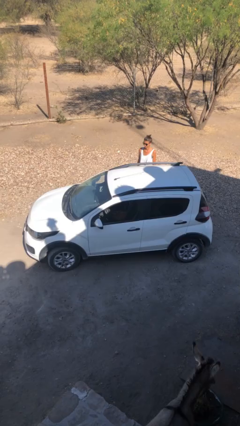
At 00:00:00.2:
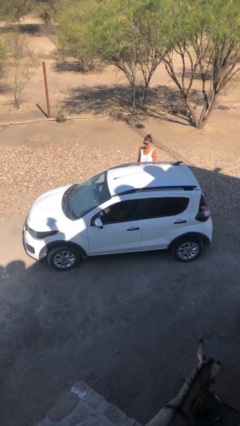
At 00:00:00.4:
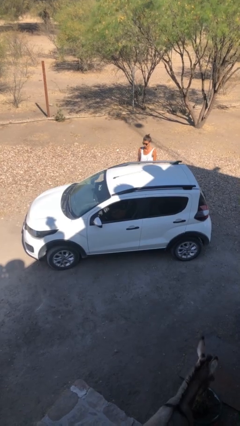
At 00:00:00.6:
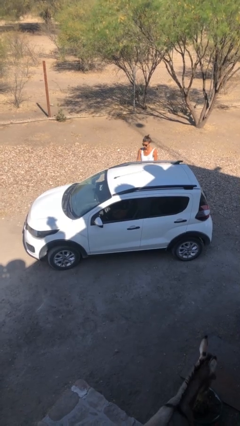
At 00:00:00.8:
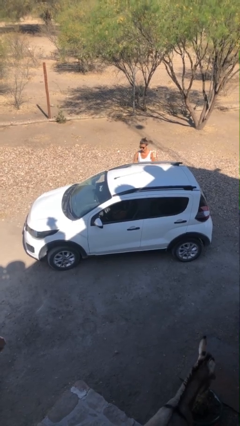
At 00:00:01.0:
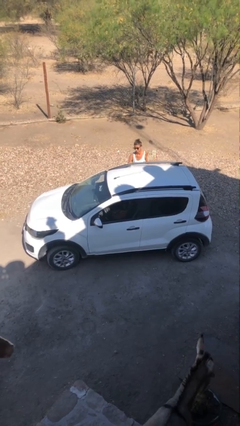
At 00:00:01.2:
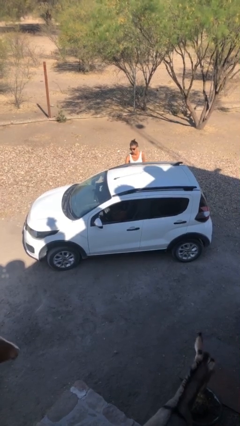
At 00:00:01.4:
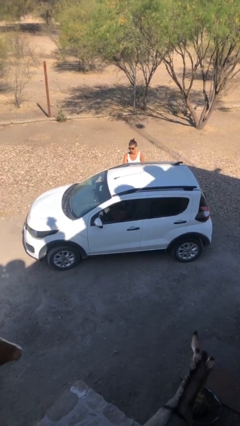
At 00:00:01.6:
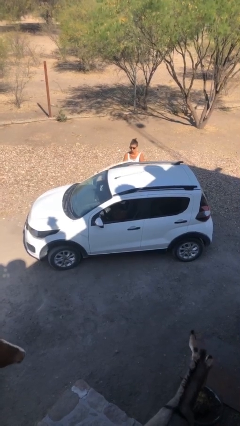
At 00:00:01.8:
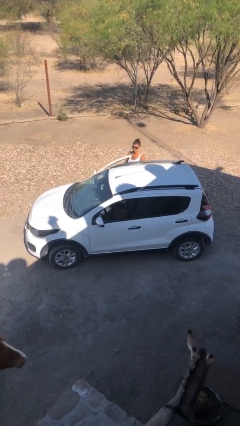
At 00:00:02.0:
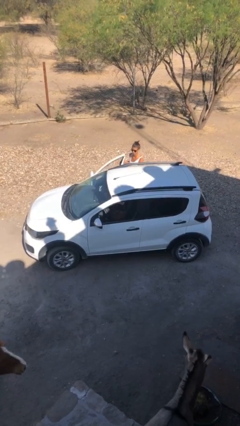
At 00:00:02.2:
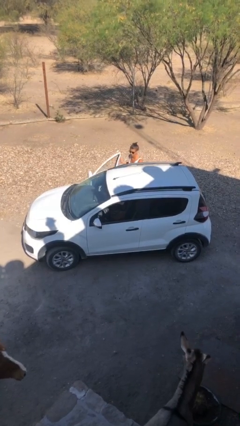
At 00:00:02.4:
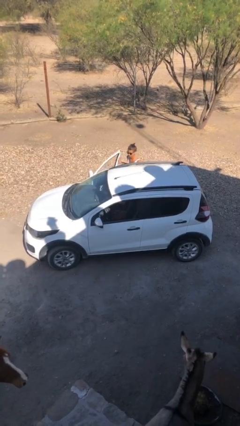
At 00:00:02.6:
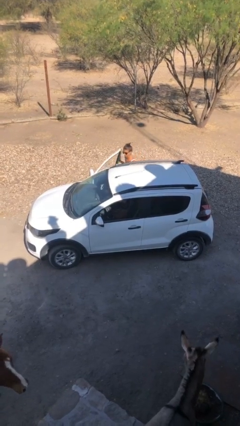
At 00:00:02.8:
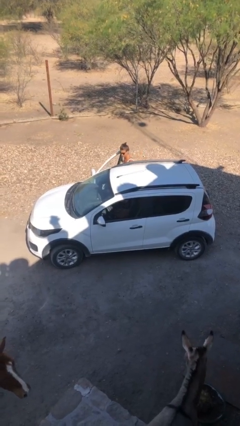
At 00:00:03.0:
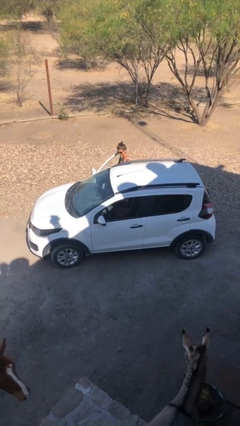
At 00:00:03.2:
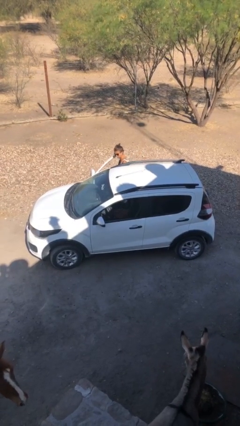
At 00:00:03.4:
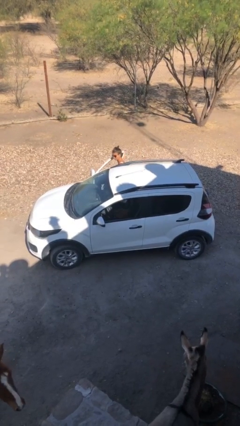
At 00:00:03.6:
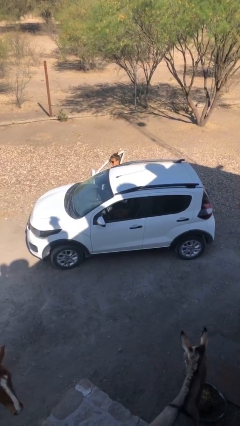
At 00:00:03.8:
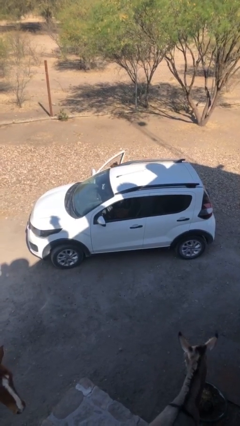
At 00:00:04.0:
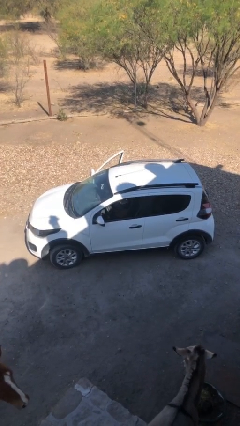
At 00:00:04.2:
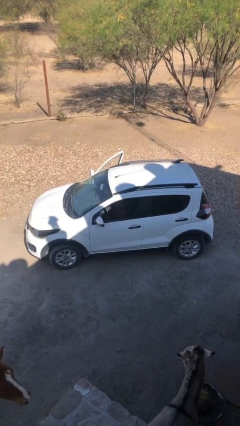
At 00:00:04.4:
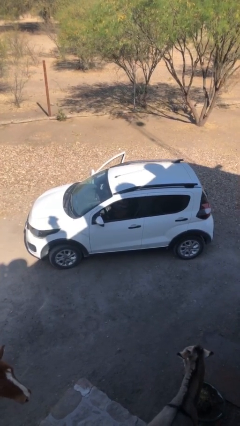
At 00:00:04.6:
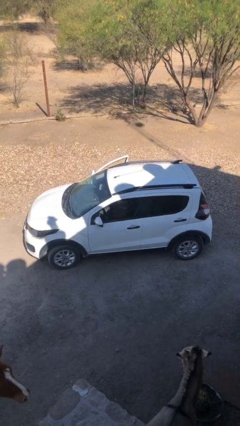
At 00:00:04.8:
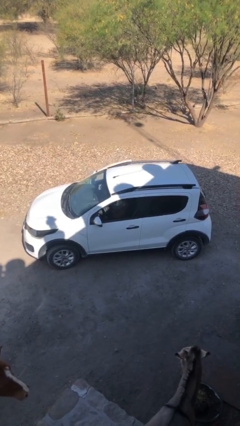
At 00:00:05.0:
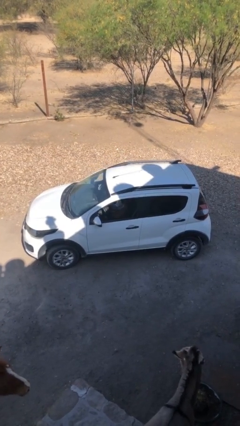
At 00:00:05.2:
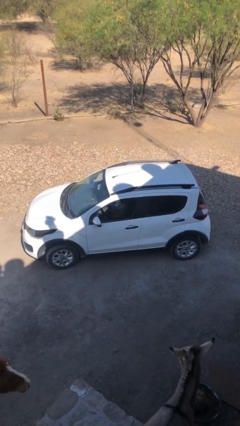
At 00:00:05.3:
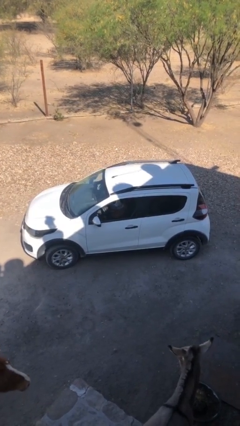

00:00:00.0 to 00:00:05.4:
car picks up person

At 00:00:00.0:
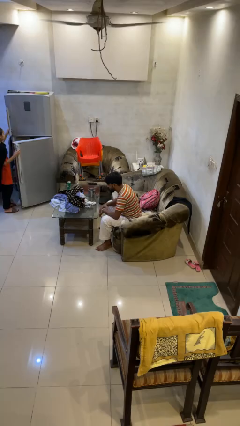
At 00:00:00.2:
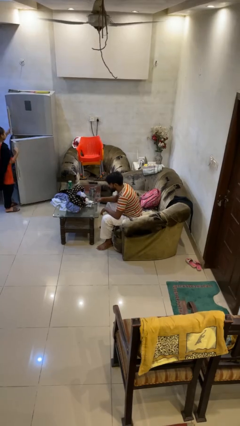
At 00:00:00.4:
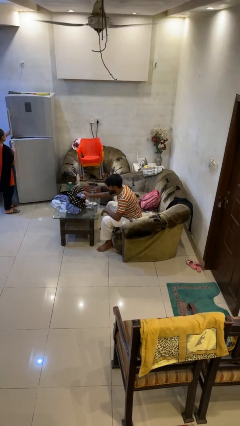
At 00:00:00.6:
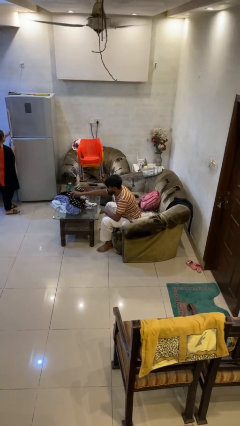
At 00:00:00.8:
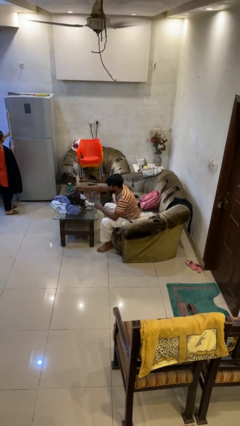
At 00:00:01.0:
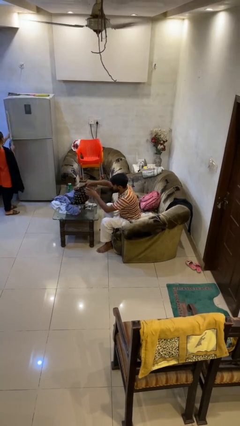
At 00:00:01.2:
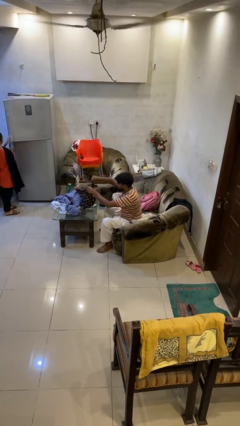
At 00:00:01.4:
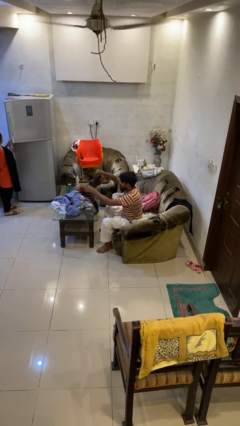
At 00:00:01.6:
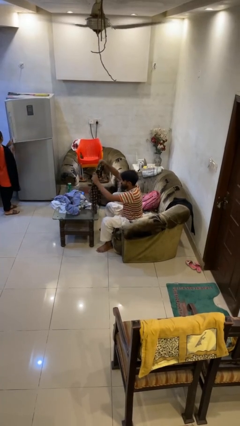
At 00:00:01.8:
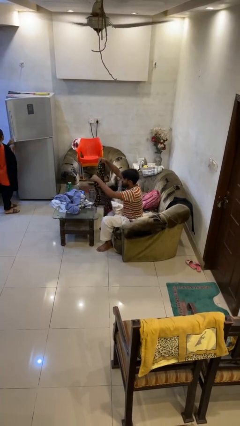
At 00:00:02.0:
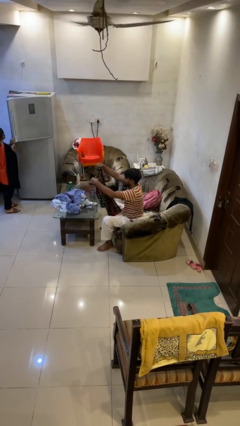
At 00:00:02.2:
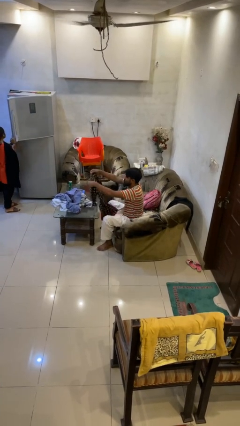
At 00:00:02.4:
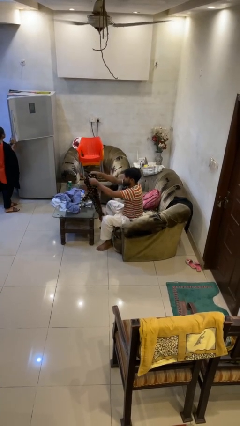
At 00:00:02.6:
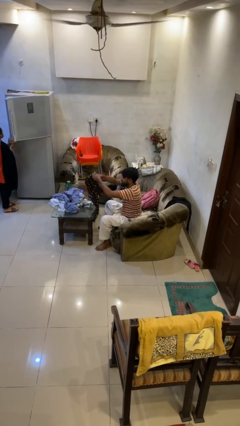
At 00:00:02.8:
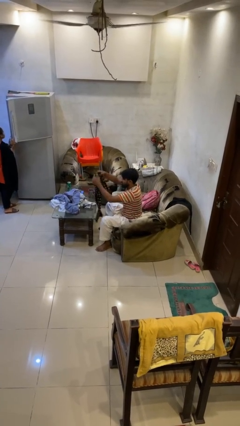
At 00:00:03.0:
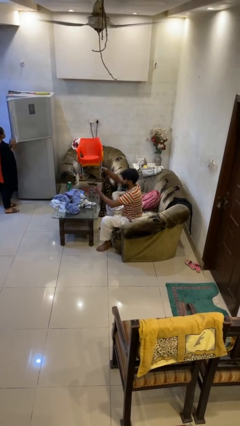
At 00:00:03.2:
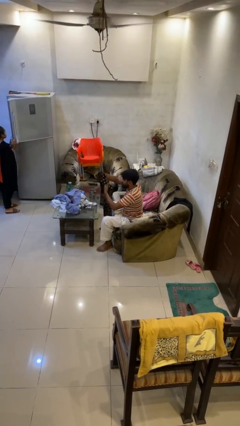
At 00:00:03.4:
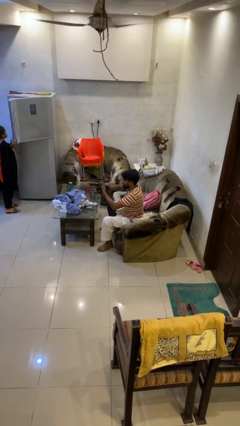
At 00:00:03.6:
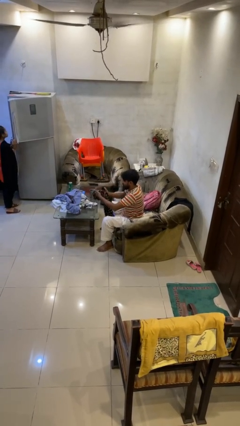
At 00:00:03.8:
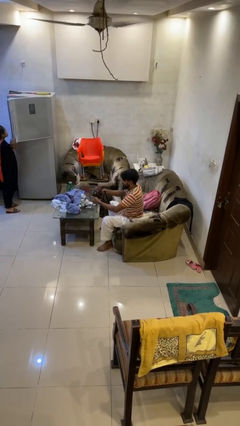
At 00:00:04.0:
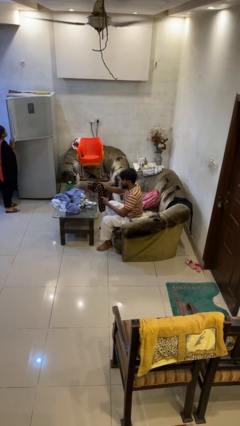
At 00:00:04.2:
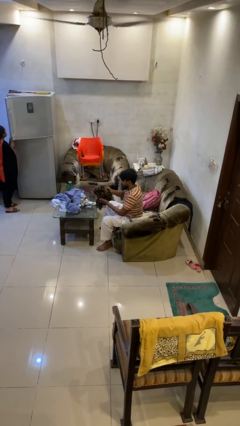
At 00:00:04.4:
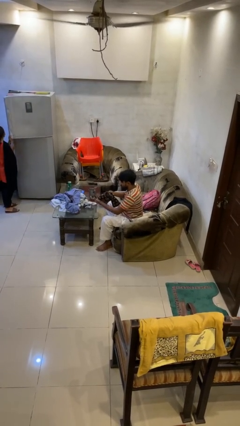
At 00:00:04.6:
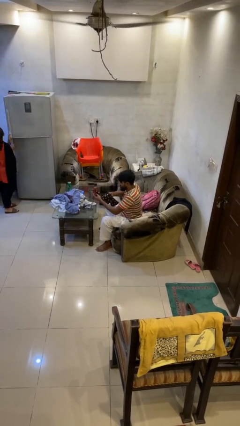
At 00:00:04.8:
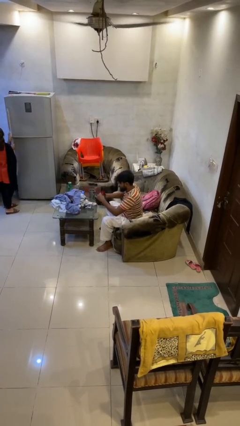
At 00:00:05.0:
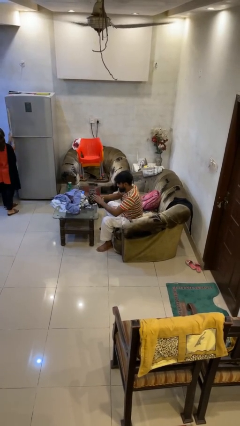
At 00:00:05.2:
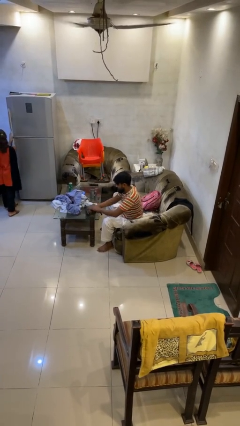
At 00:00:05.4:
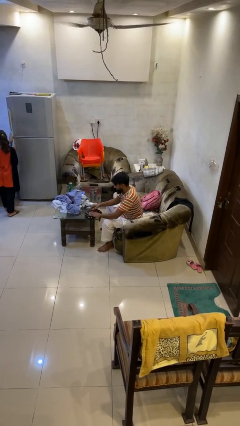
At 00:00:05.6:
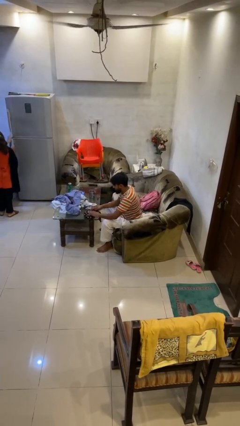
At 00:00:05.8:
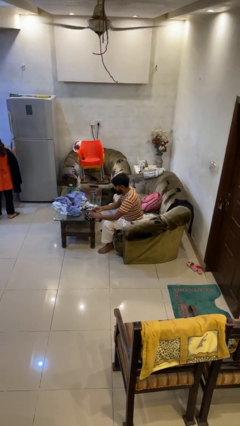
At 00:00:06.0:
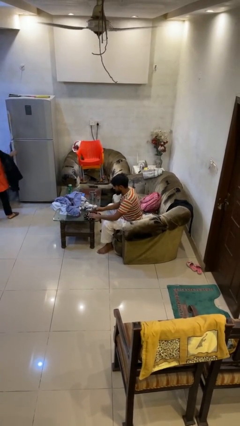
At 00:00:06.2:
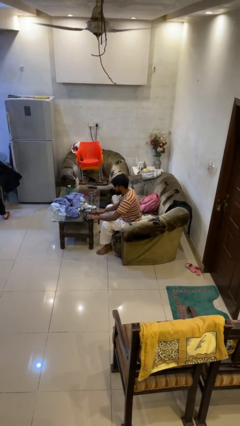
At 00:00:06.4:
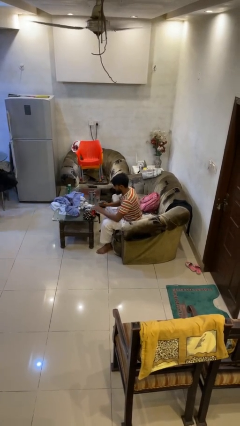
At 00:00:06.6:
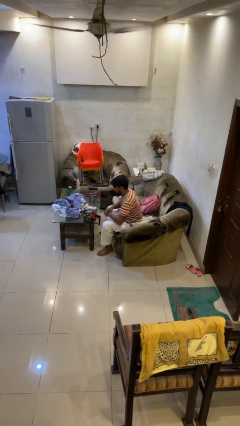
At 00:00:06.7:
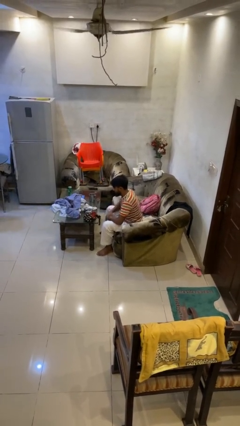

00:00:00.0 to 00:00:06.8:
person folds shirt

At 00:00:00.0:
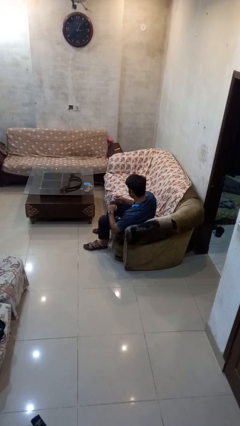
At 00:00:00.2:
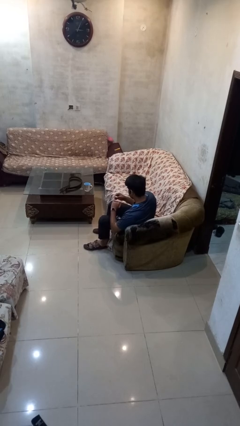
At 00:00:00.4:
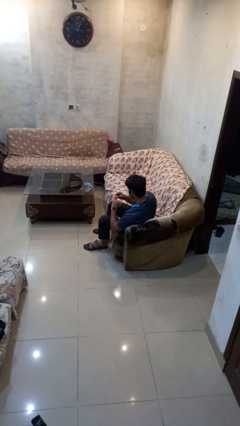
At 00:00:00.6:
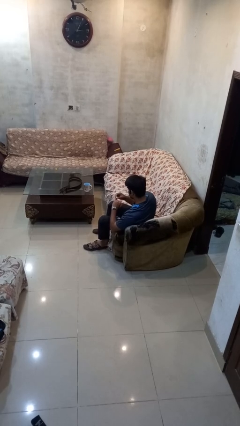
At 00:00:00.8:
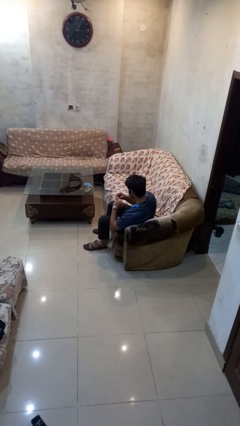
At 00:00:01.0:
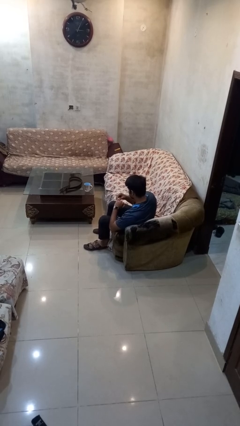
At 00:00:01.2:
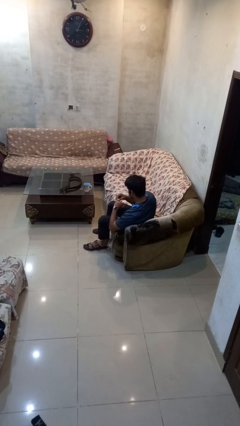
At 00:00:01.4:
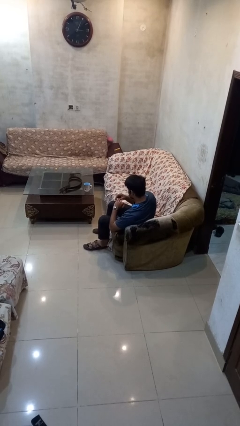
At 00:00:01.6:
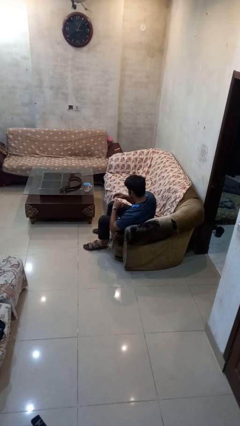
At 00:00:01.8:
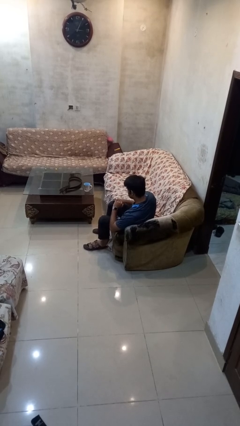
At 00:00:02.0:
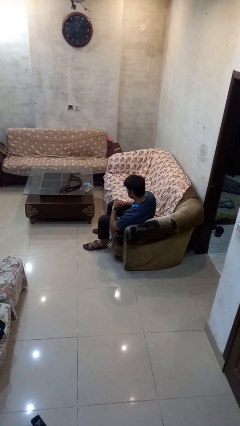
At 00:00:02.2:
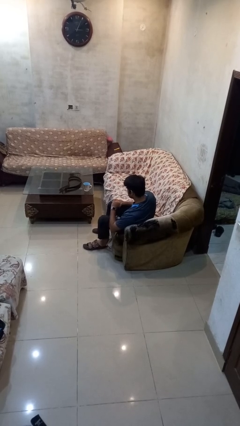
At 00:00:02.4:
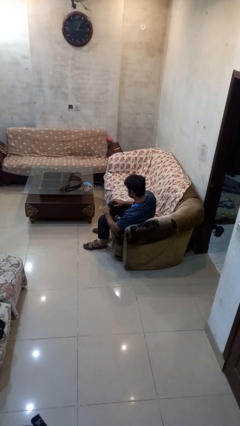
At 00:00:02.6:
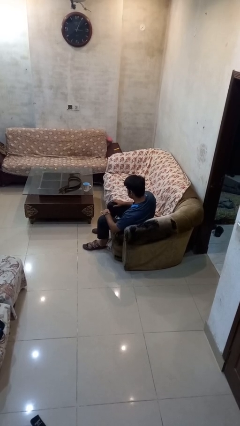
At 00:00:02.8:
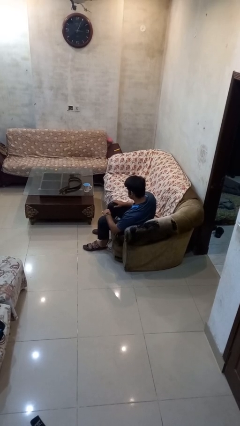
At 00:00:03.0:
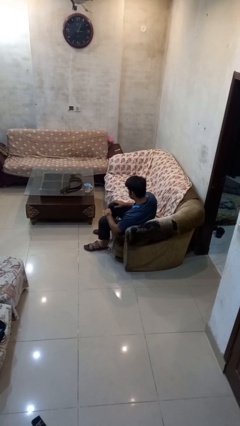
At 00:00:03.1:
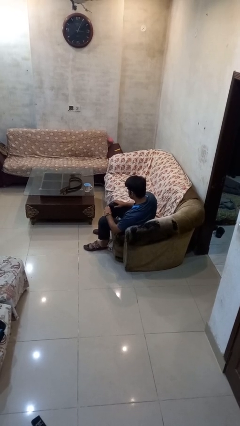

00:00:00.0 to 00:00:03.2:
person puts on ring

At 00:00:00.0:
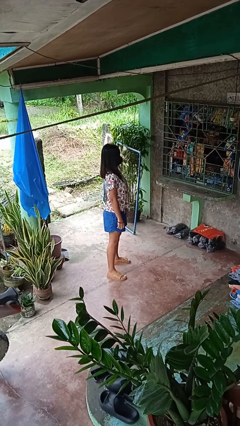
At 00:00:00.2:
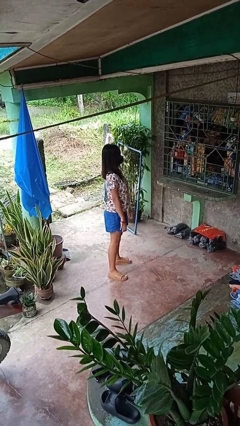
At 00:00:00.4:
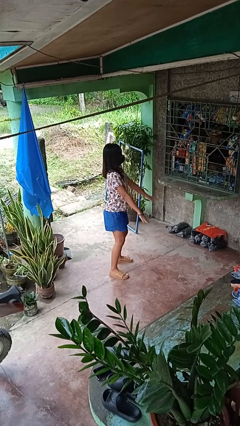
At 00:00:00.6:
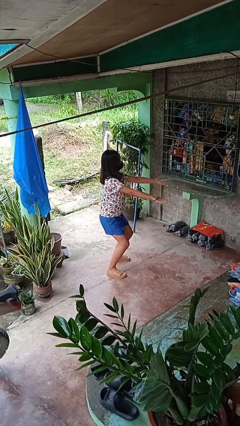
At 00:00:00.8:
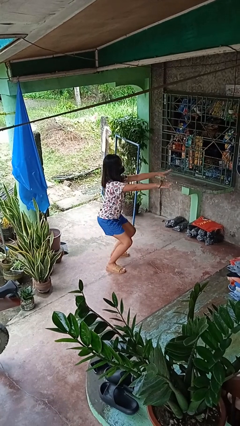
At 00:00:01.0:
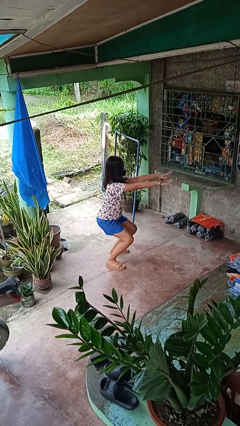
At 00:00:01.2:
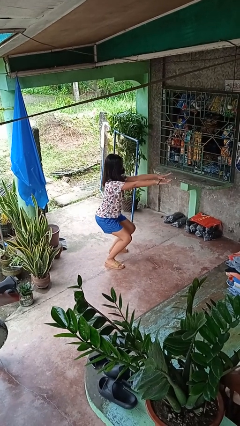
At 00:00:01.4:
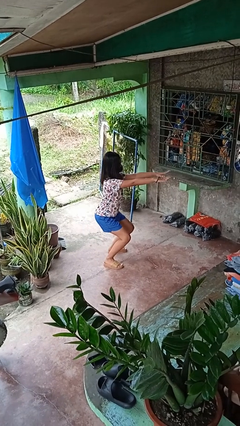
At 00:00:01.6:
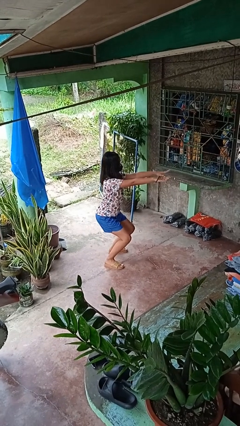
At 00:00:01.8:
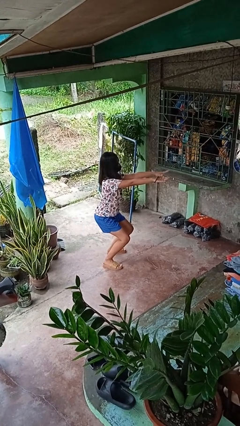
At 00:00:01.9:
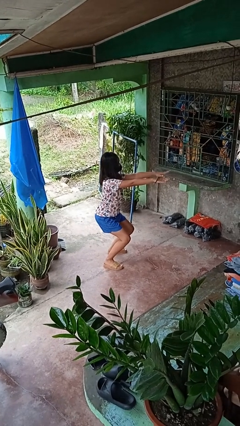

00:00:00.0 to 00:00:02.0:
person squats

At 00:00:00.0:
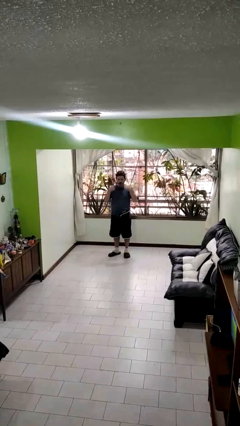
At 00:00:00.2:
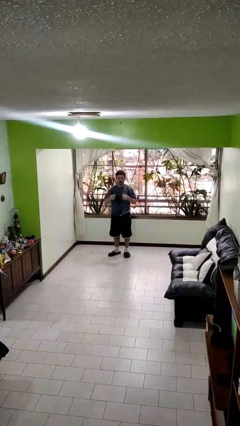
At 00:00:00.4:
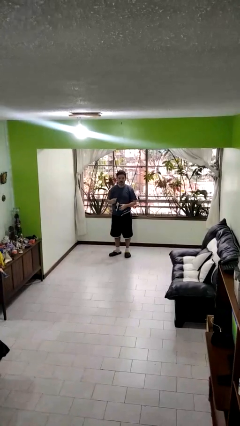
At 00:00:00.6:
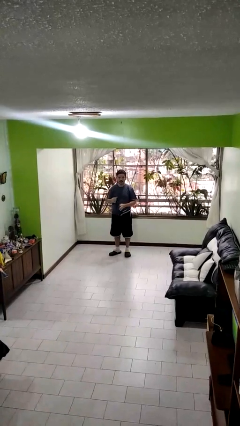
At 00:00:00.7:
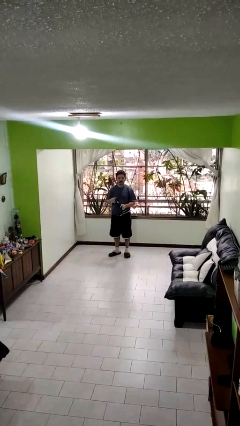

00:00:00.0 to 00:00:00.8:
person takes off facemask
